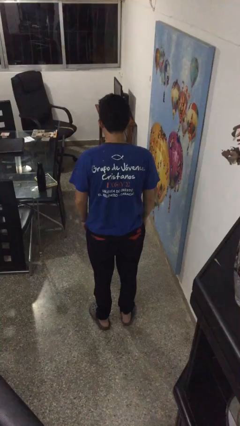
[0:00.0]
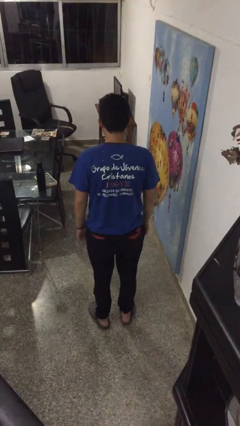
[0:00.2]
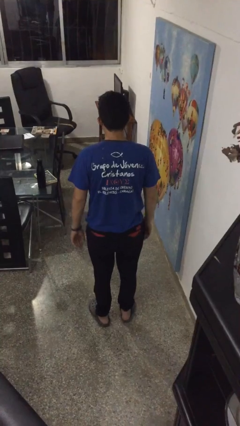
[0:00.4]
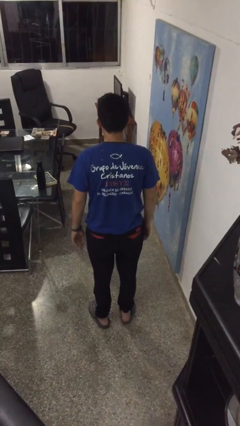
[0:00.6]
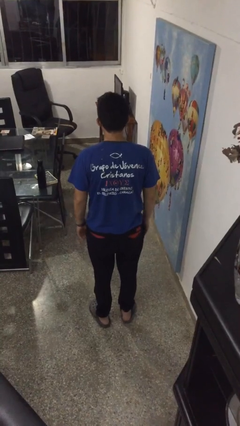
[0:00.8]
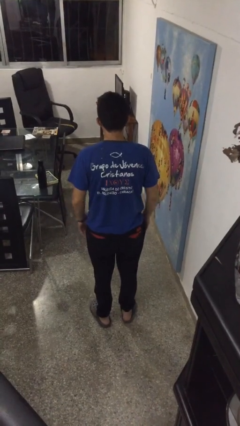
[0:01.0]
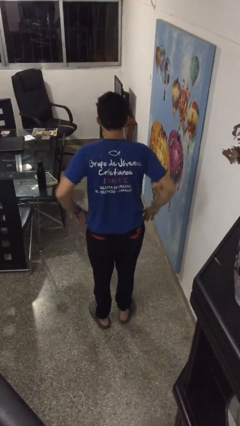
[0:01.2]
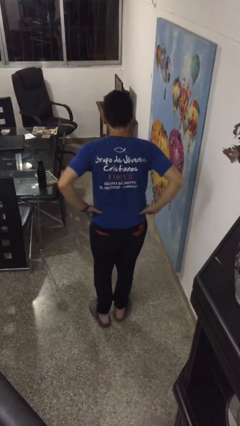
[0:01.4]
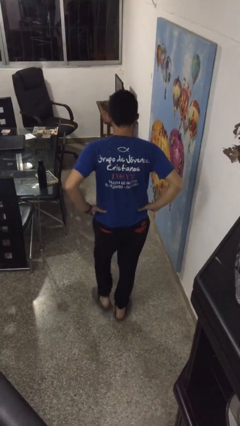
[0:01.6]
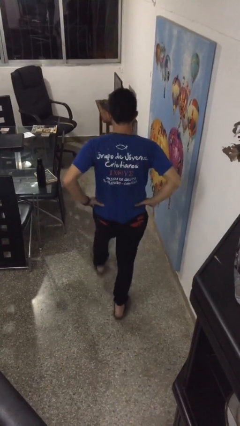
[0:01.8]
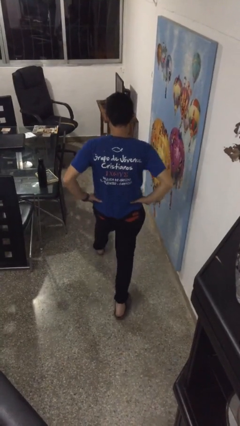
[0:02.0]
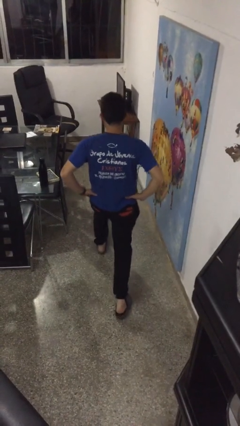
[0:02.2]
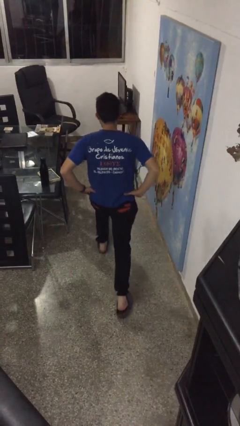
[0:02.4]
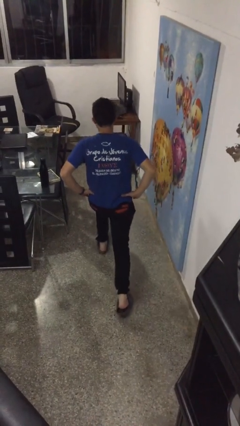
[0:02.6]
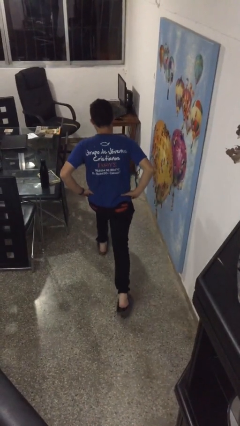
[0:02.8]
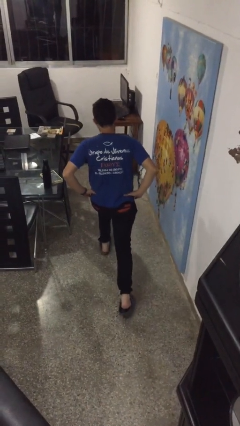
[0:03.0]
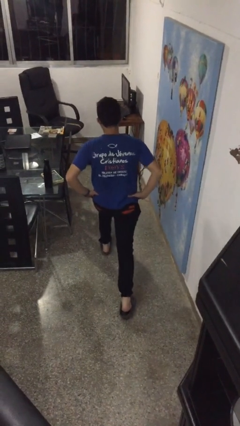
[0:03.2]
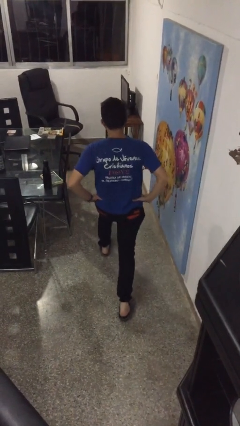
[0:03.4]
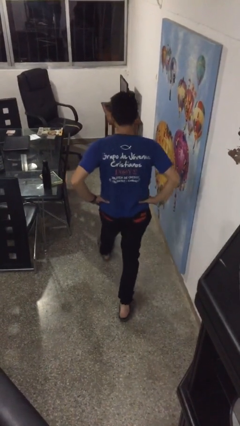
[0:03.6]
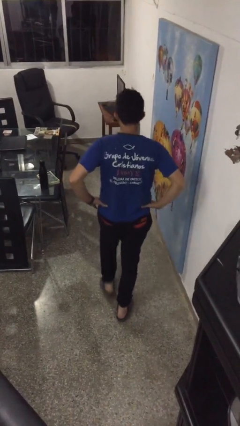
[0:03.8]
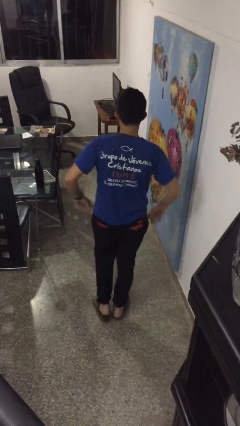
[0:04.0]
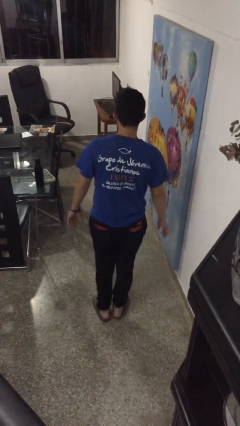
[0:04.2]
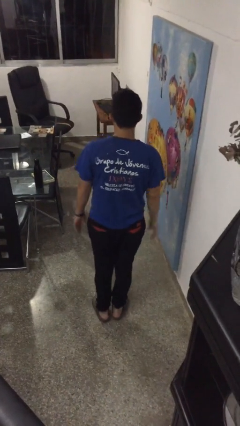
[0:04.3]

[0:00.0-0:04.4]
person exercises with lunges

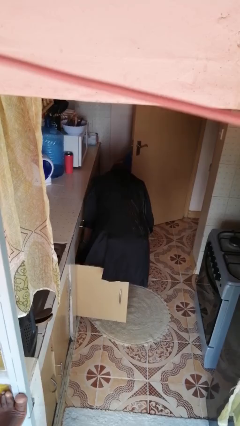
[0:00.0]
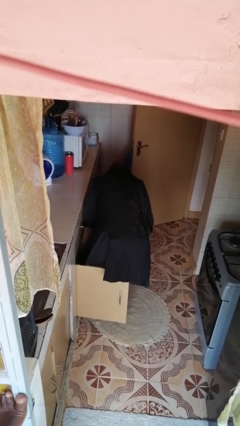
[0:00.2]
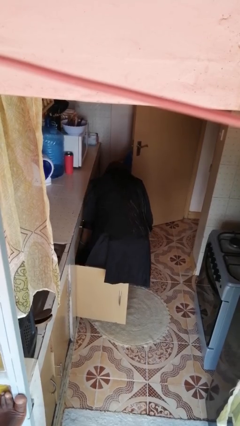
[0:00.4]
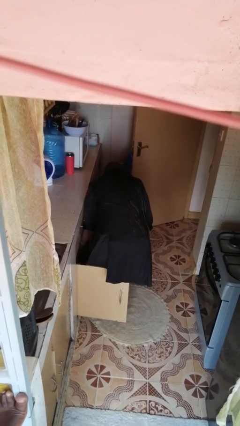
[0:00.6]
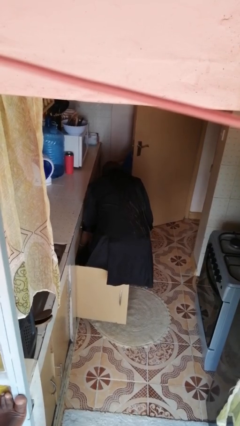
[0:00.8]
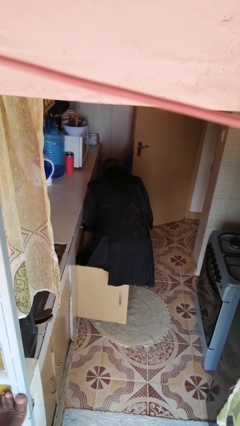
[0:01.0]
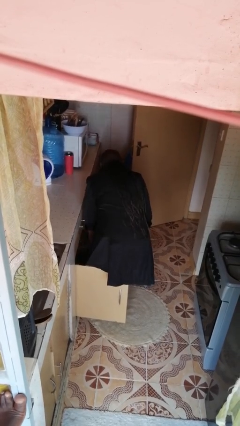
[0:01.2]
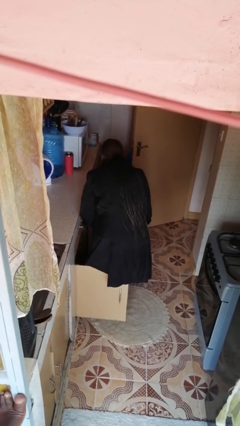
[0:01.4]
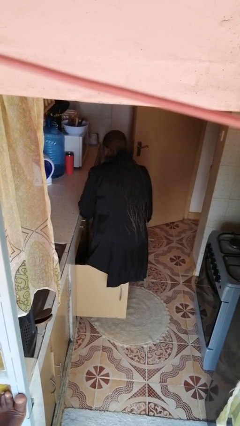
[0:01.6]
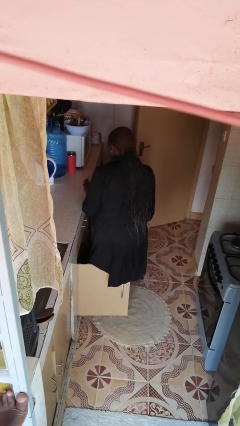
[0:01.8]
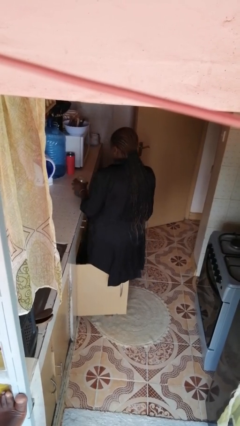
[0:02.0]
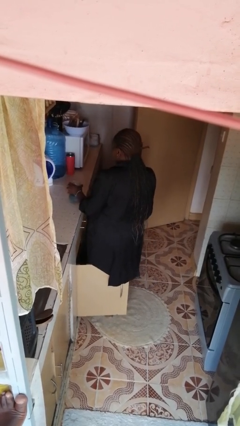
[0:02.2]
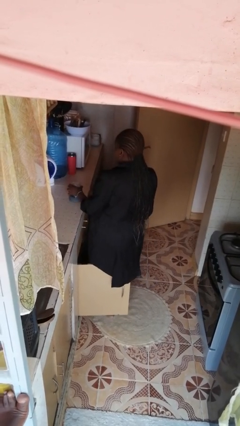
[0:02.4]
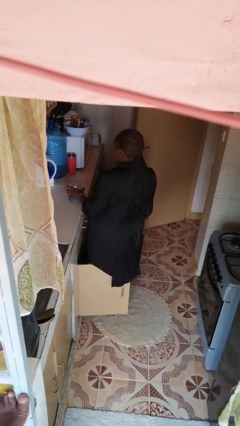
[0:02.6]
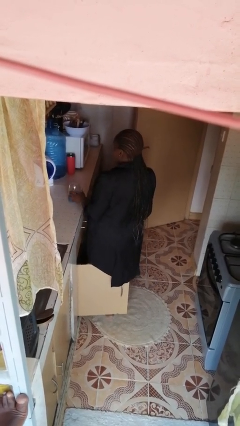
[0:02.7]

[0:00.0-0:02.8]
person takes object from cabinet

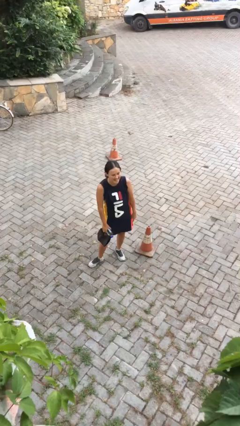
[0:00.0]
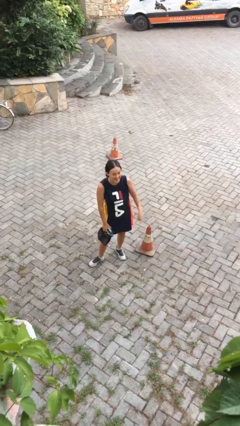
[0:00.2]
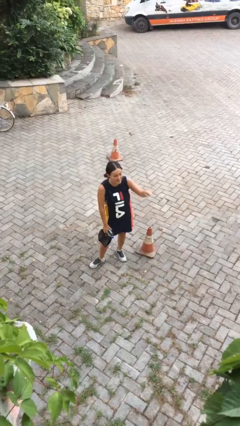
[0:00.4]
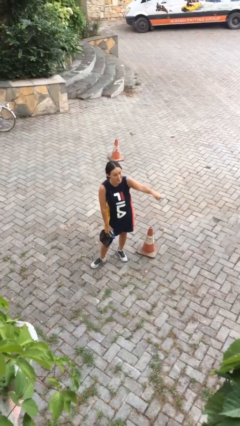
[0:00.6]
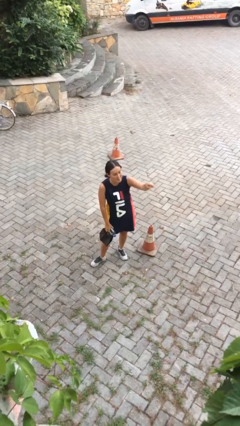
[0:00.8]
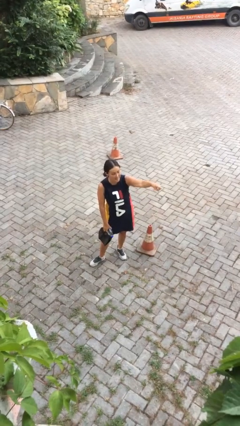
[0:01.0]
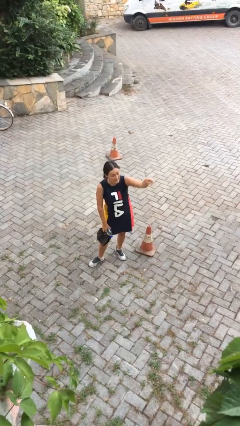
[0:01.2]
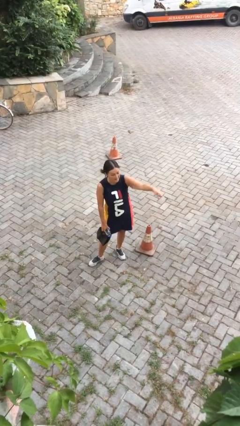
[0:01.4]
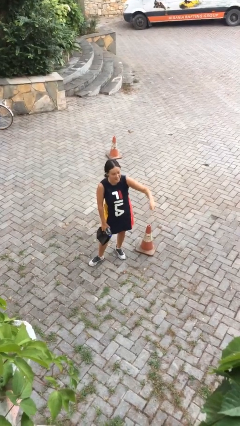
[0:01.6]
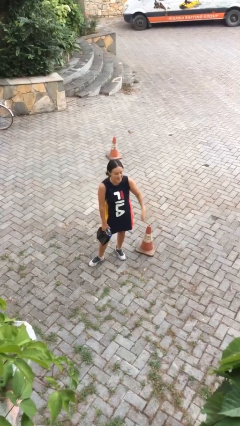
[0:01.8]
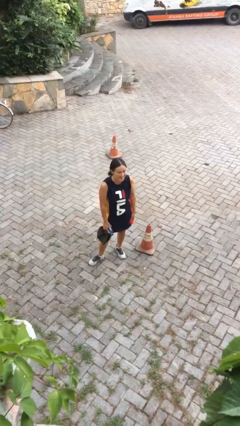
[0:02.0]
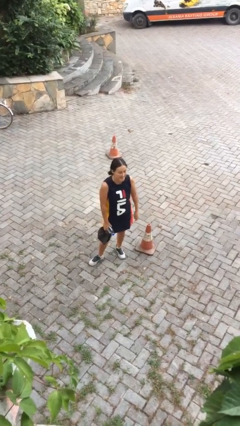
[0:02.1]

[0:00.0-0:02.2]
person points at person

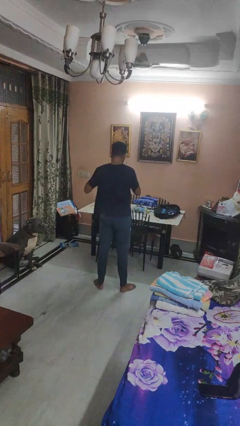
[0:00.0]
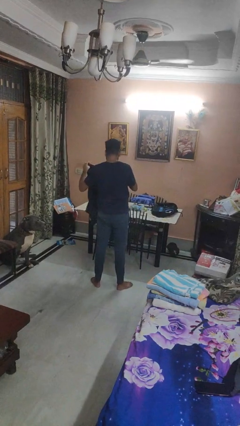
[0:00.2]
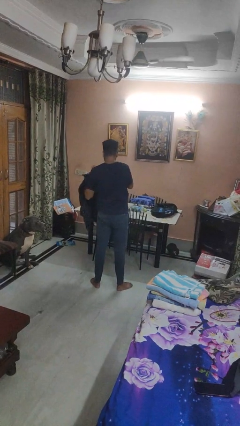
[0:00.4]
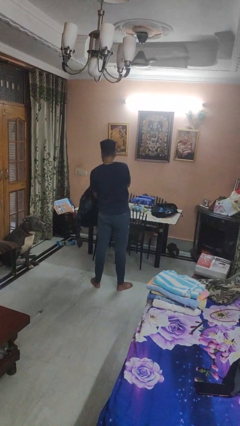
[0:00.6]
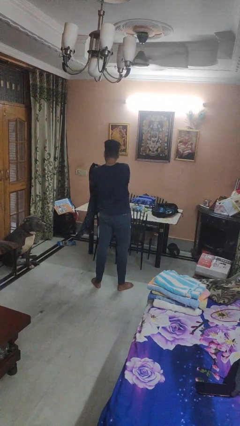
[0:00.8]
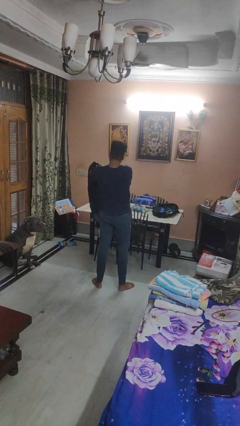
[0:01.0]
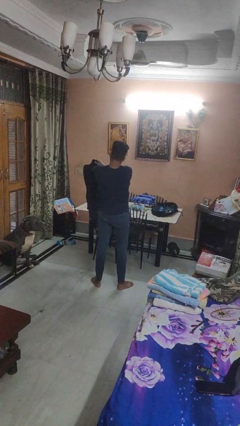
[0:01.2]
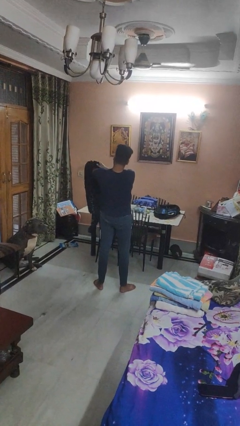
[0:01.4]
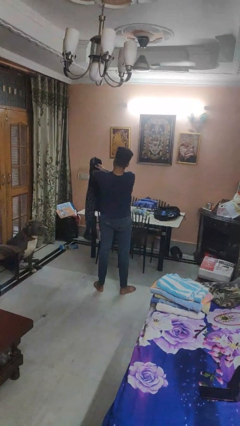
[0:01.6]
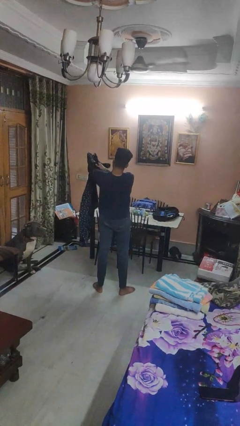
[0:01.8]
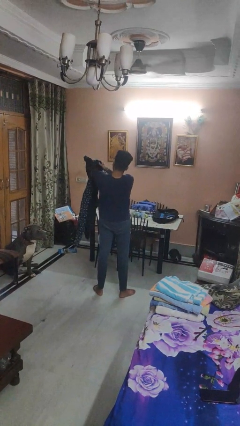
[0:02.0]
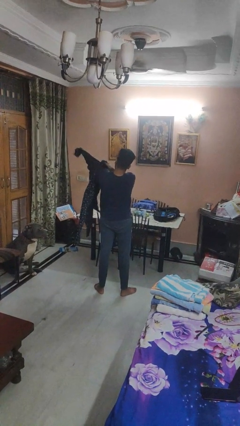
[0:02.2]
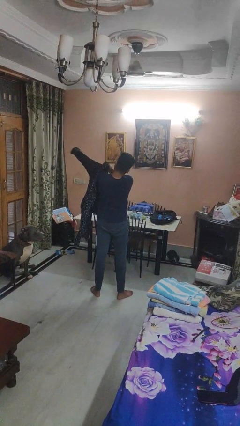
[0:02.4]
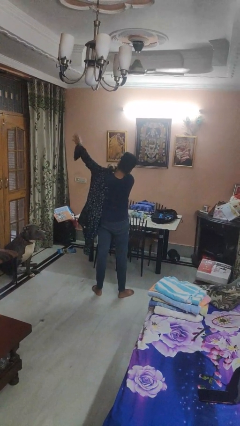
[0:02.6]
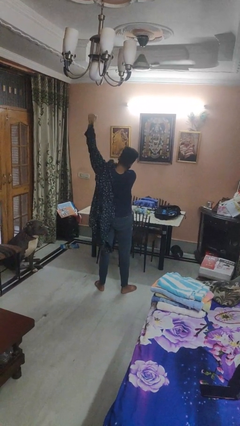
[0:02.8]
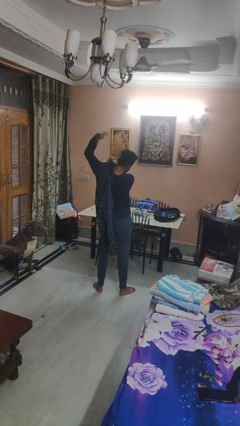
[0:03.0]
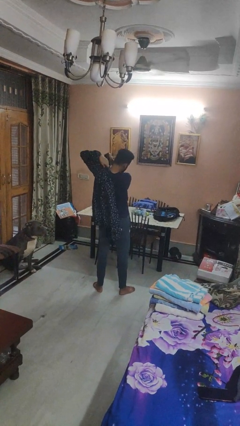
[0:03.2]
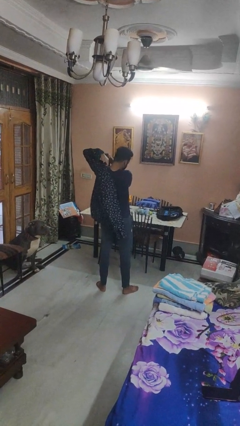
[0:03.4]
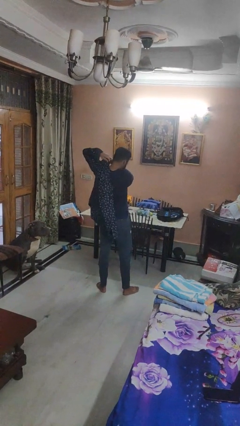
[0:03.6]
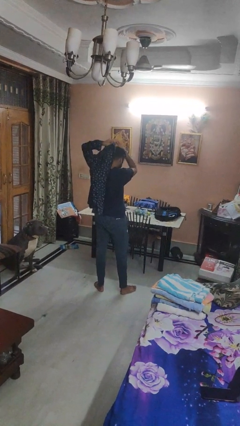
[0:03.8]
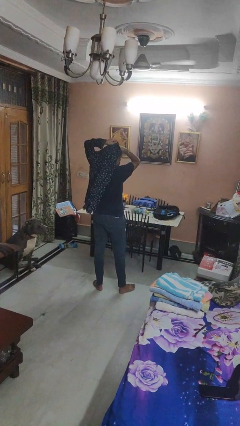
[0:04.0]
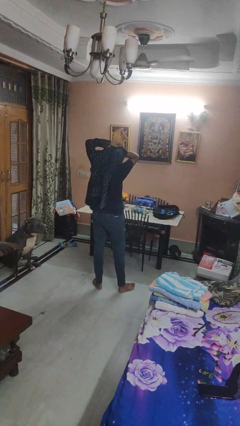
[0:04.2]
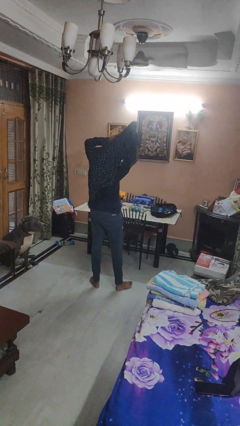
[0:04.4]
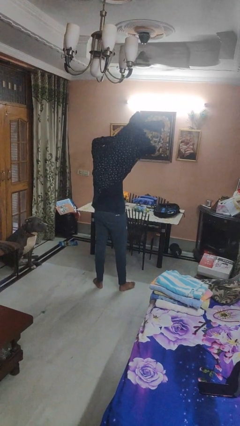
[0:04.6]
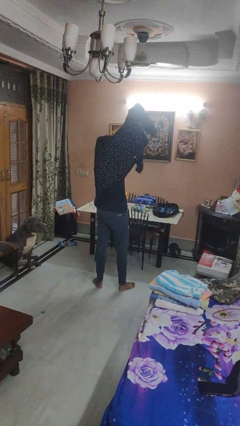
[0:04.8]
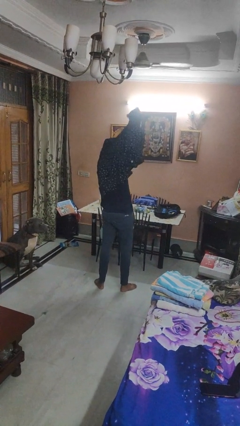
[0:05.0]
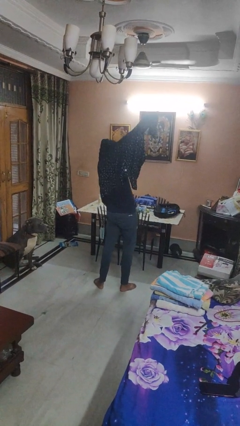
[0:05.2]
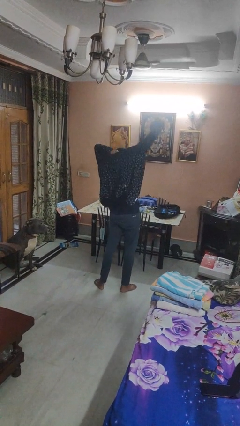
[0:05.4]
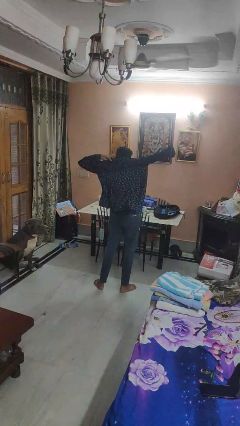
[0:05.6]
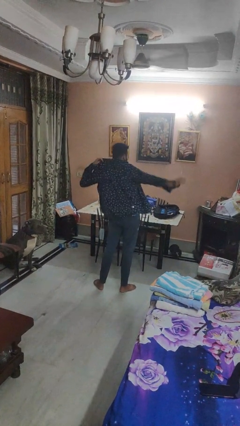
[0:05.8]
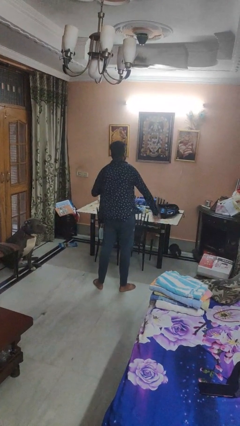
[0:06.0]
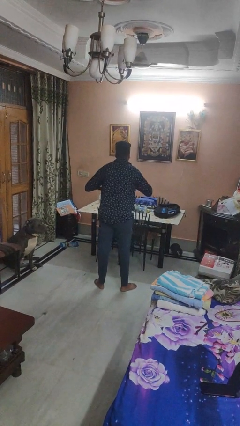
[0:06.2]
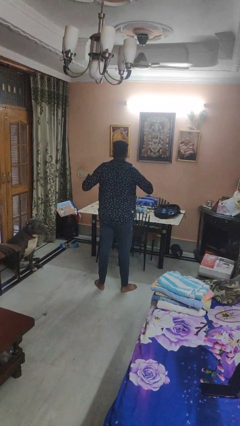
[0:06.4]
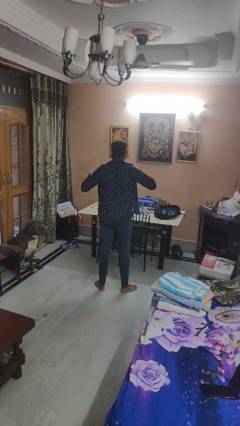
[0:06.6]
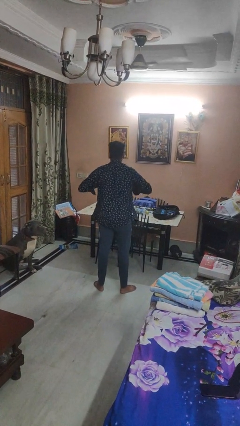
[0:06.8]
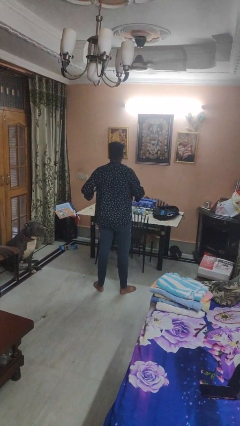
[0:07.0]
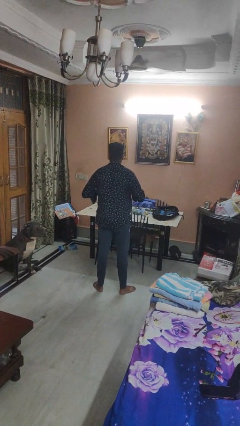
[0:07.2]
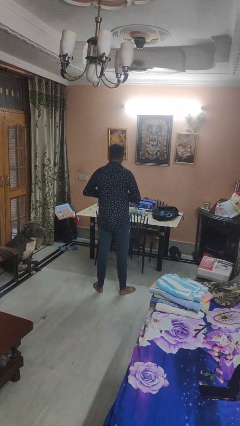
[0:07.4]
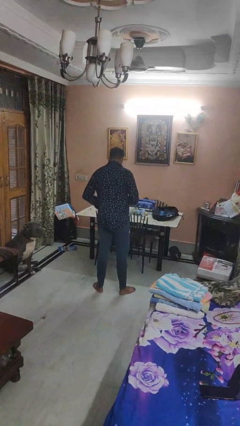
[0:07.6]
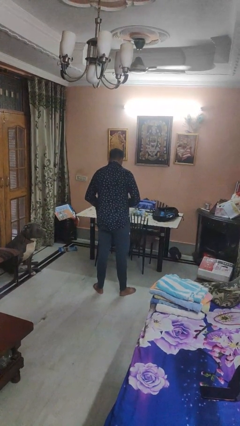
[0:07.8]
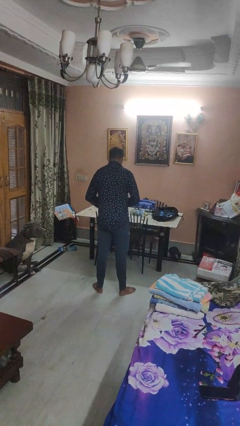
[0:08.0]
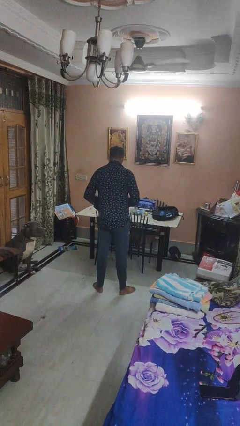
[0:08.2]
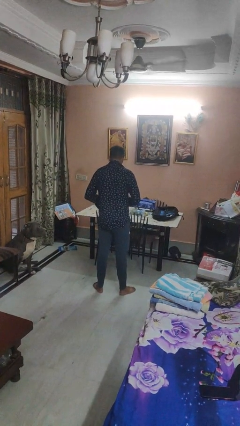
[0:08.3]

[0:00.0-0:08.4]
person puts on shirt
